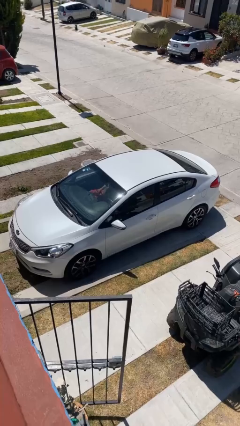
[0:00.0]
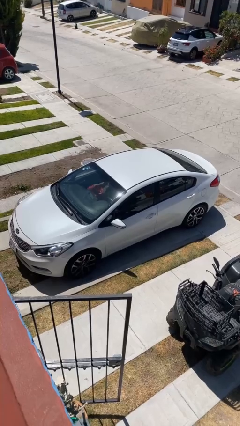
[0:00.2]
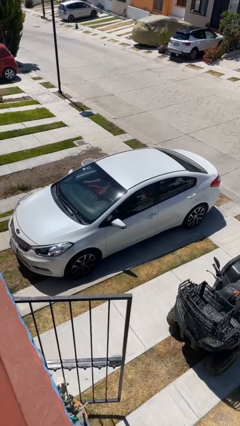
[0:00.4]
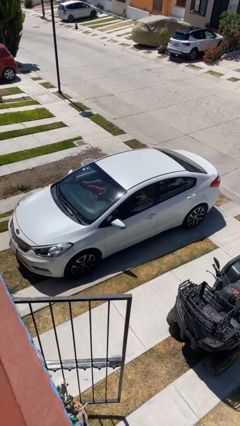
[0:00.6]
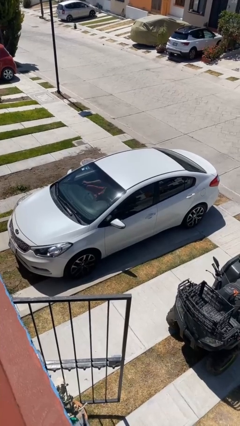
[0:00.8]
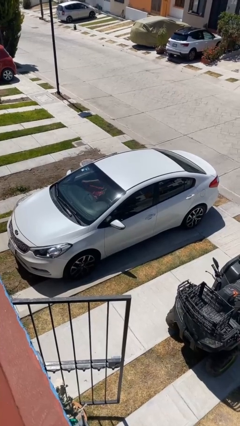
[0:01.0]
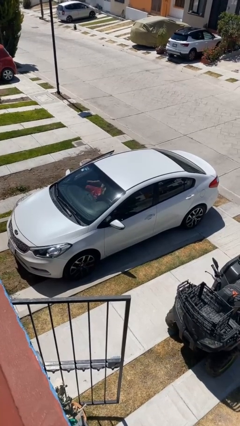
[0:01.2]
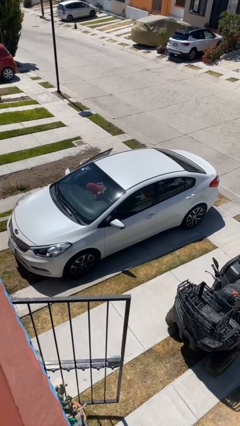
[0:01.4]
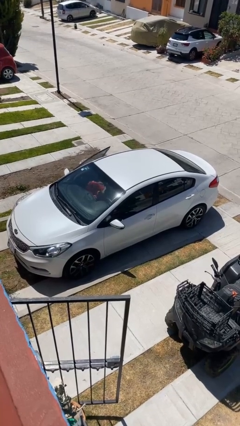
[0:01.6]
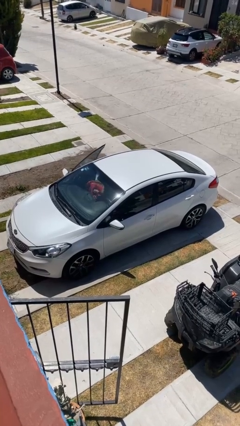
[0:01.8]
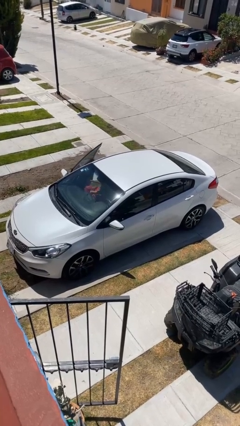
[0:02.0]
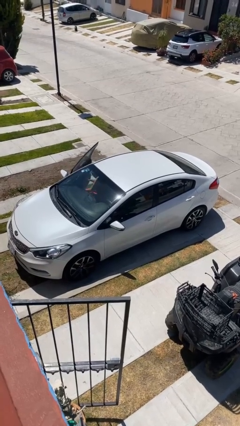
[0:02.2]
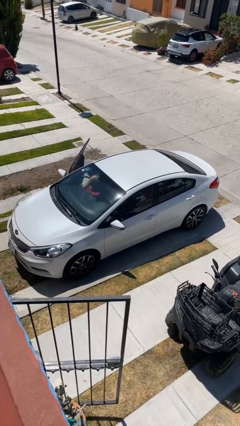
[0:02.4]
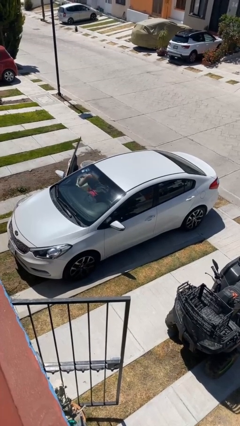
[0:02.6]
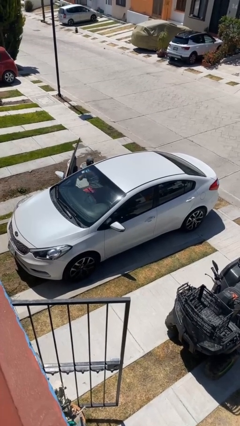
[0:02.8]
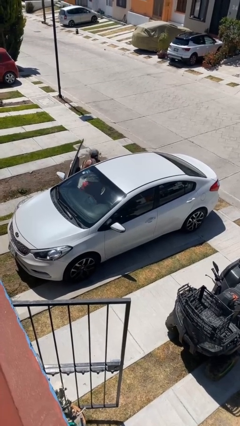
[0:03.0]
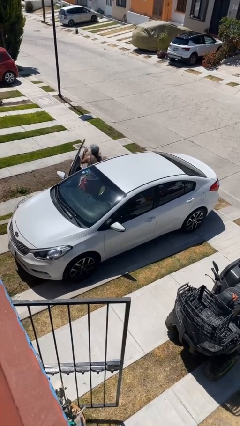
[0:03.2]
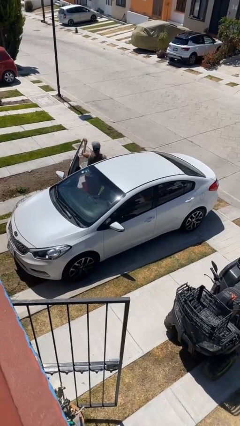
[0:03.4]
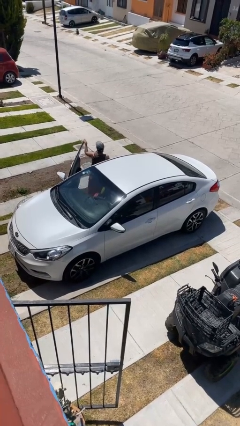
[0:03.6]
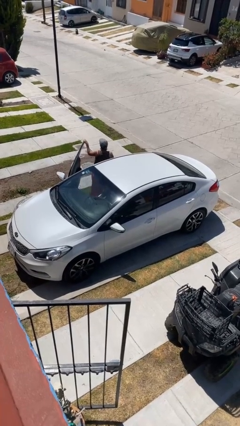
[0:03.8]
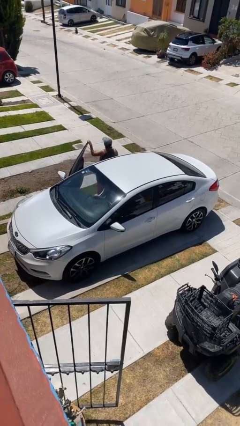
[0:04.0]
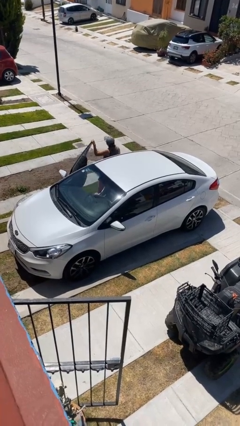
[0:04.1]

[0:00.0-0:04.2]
car drops off person

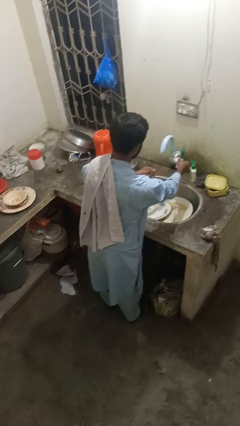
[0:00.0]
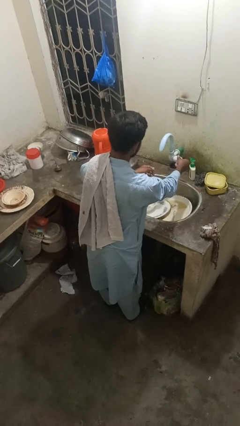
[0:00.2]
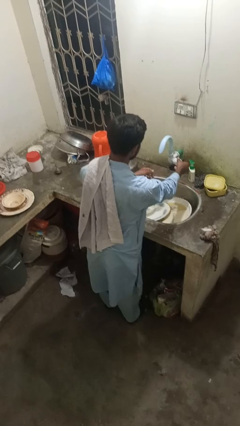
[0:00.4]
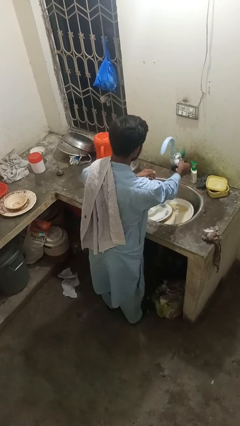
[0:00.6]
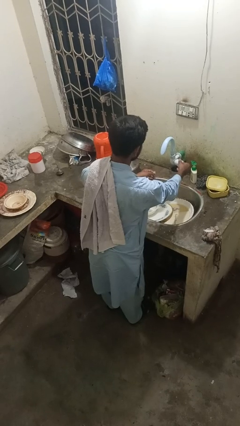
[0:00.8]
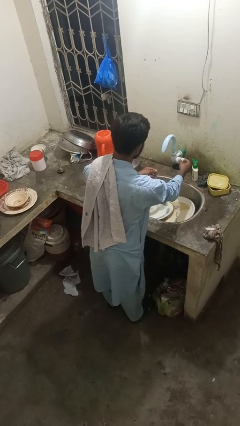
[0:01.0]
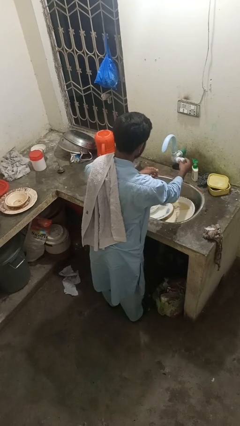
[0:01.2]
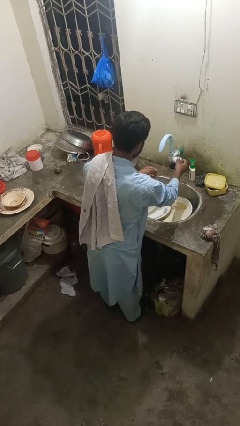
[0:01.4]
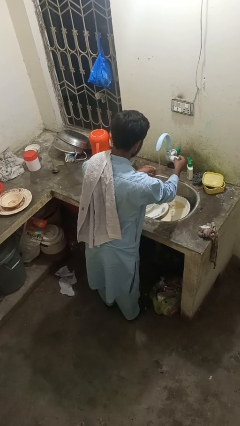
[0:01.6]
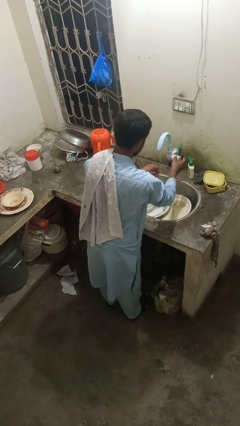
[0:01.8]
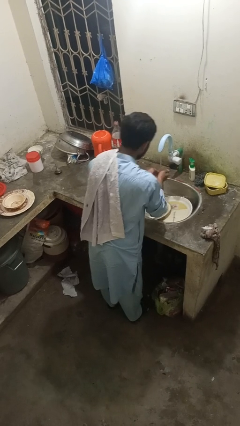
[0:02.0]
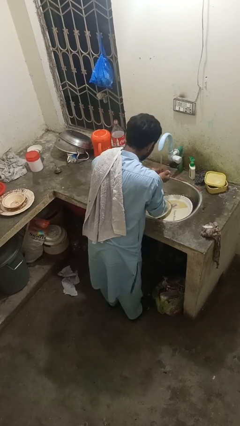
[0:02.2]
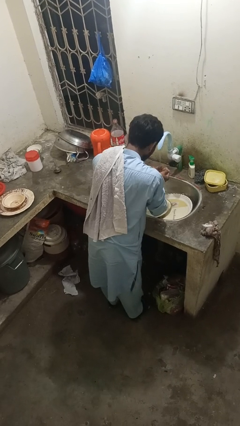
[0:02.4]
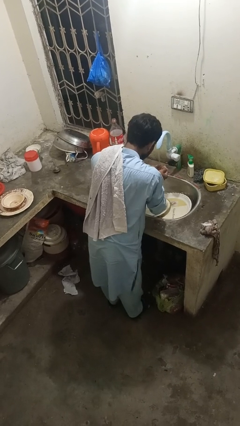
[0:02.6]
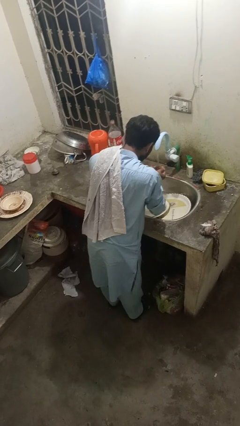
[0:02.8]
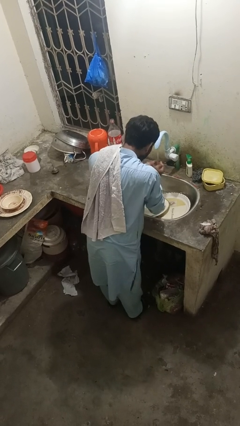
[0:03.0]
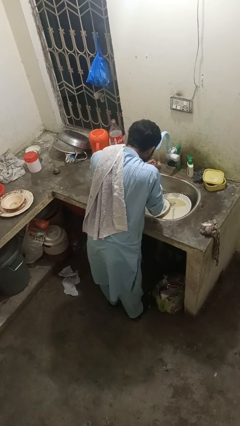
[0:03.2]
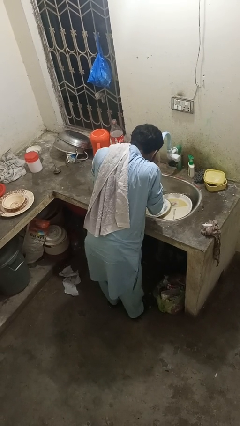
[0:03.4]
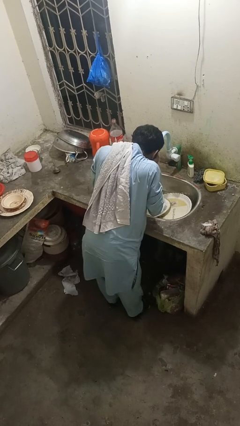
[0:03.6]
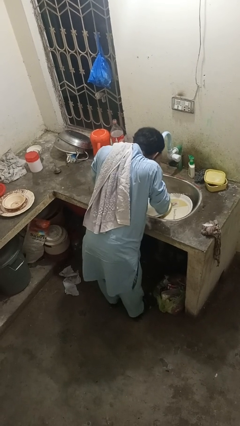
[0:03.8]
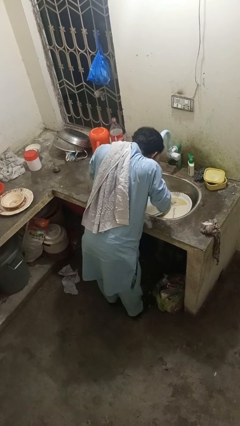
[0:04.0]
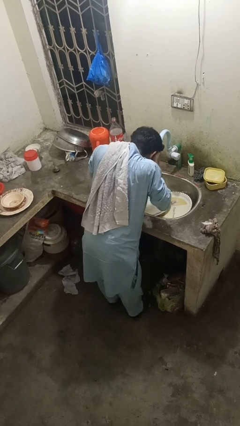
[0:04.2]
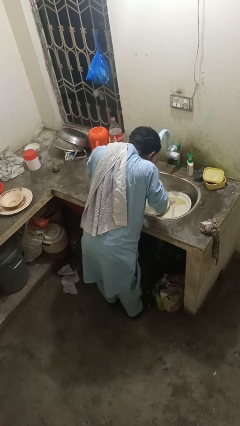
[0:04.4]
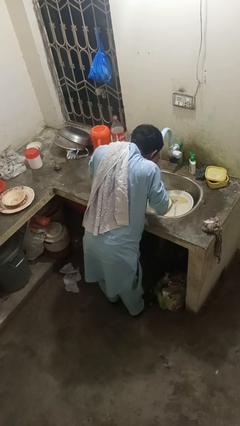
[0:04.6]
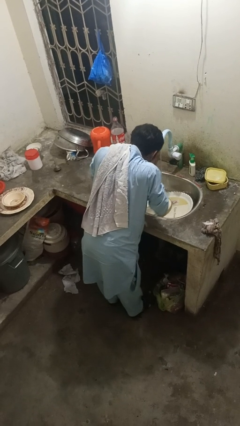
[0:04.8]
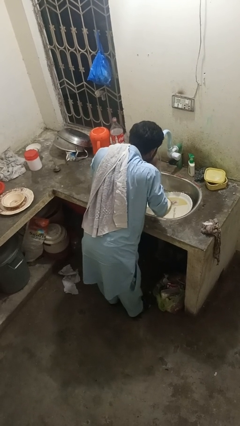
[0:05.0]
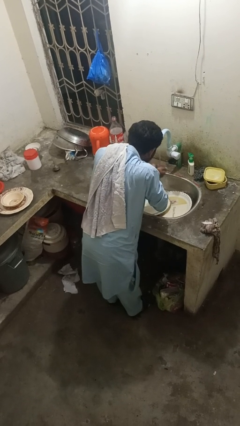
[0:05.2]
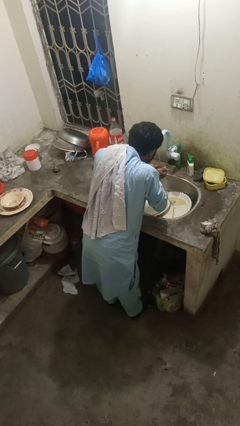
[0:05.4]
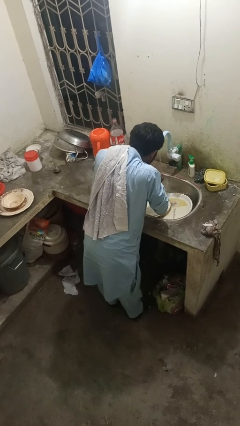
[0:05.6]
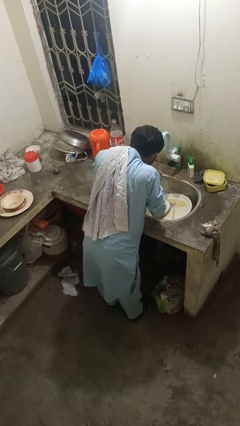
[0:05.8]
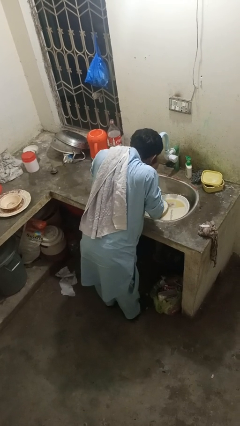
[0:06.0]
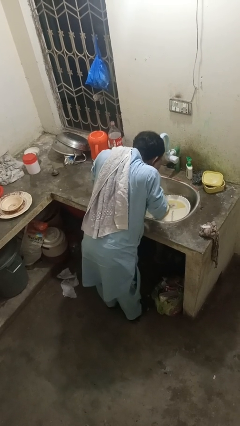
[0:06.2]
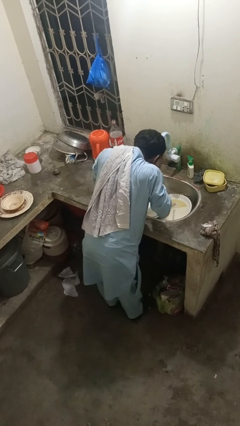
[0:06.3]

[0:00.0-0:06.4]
person washes face

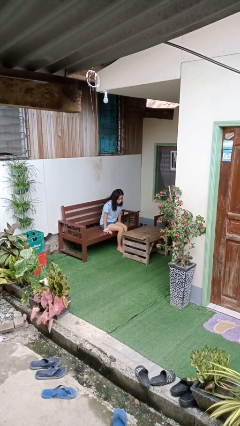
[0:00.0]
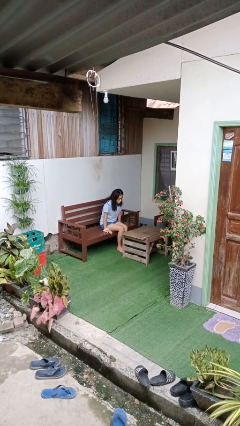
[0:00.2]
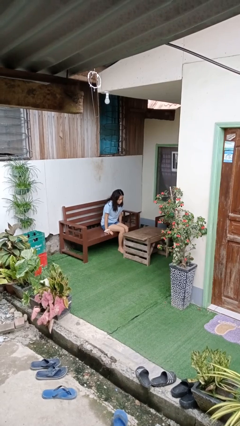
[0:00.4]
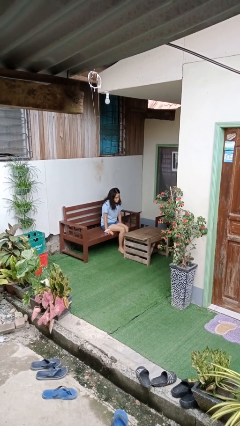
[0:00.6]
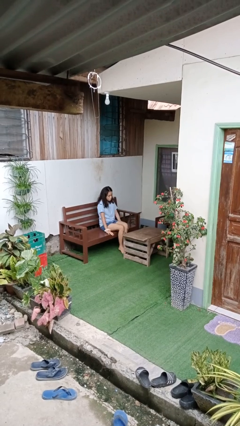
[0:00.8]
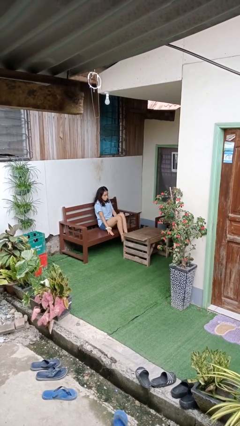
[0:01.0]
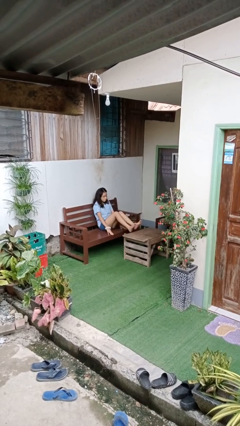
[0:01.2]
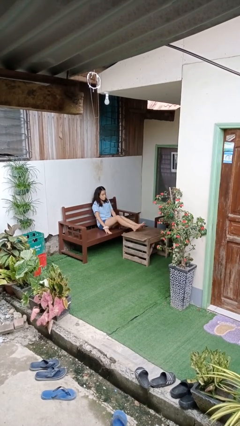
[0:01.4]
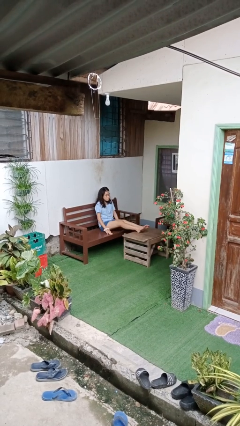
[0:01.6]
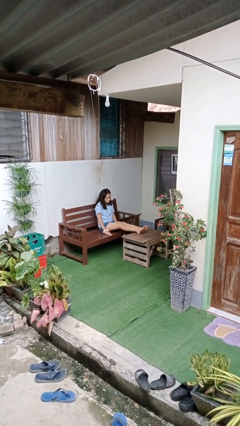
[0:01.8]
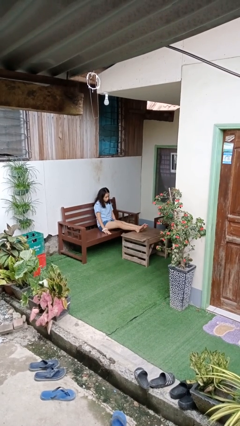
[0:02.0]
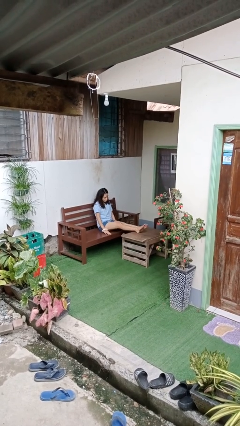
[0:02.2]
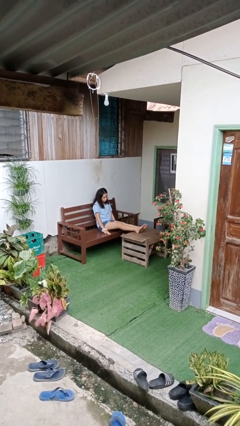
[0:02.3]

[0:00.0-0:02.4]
person puts feet up

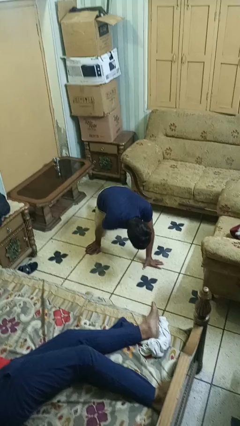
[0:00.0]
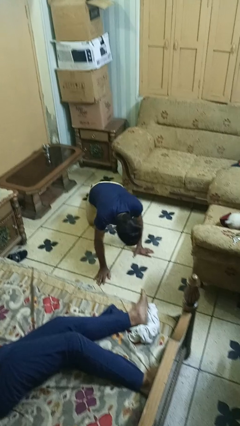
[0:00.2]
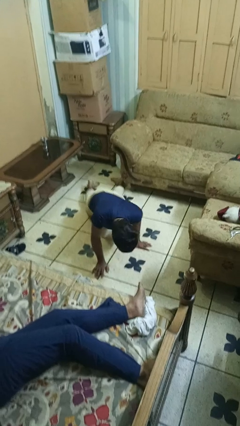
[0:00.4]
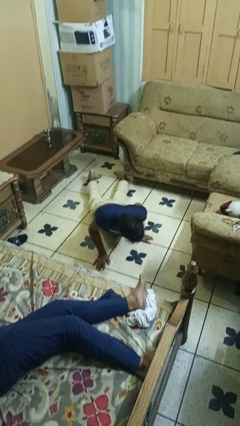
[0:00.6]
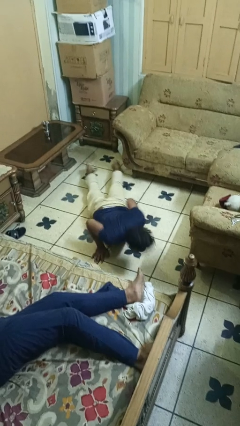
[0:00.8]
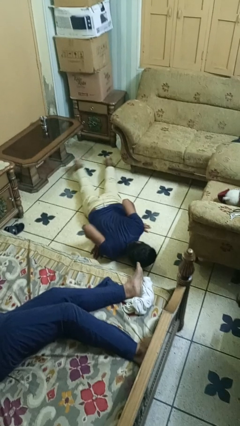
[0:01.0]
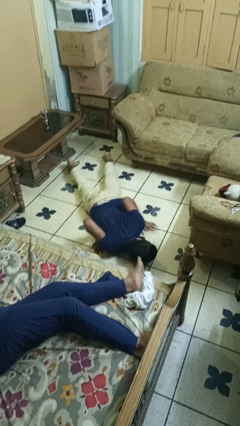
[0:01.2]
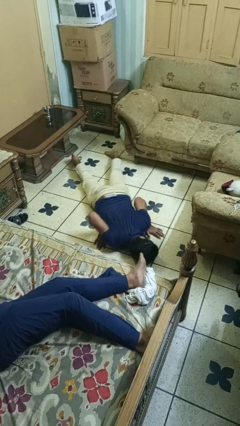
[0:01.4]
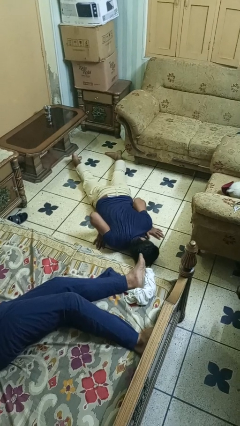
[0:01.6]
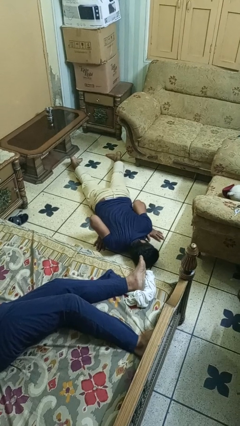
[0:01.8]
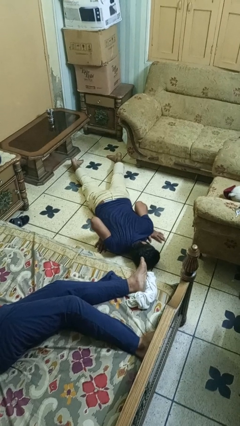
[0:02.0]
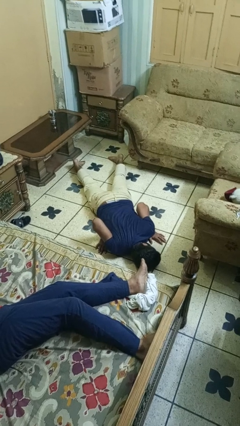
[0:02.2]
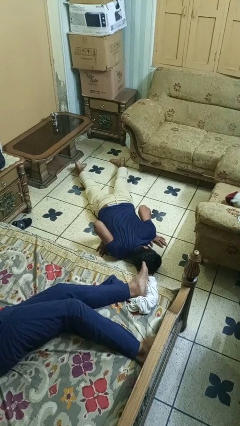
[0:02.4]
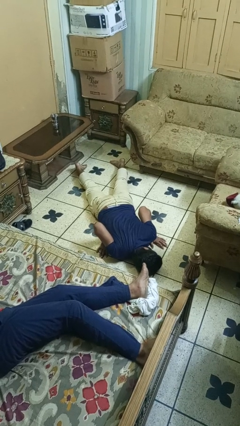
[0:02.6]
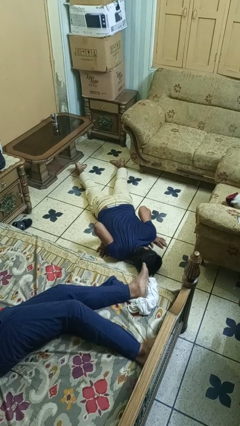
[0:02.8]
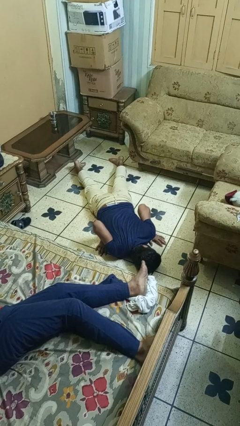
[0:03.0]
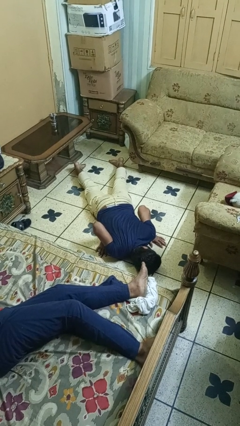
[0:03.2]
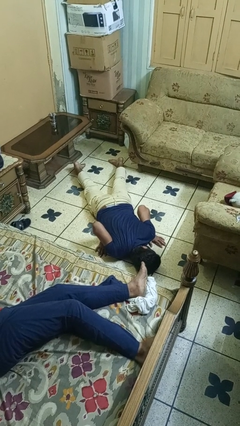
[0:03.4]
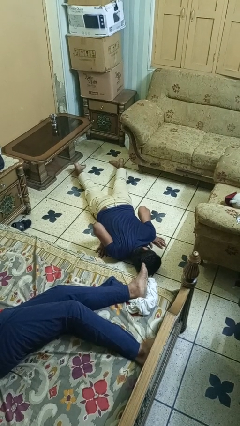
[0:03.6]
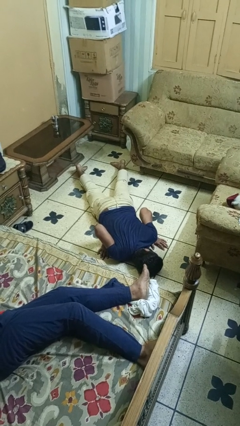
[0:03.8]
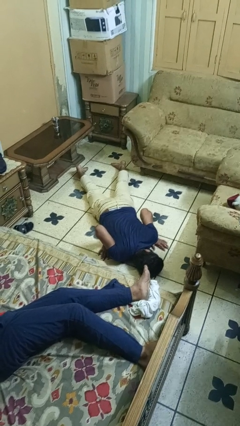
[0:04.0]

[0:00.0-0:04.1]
person lies down on floor

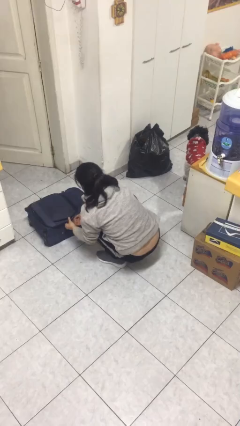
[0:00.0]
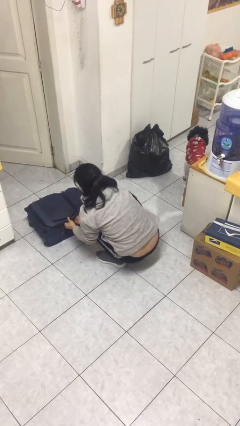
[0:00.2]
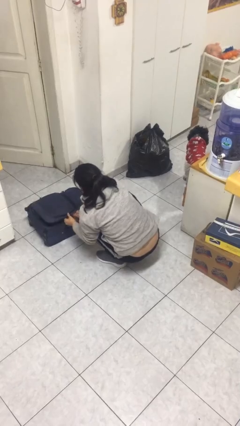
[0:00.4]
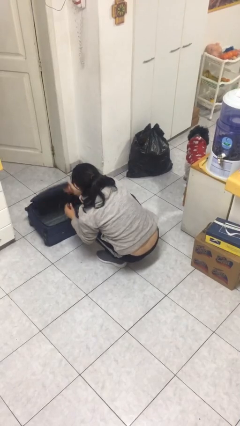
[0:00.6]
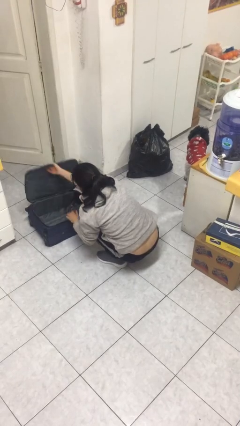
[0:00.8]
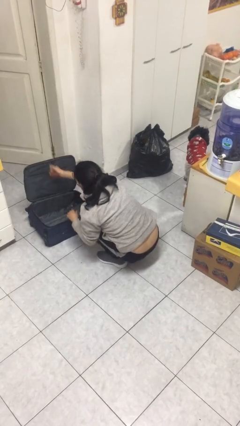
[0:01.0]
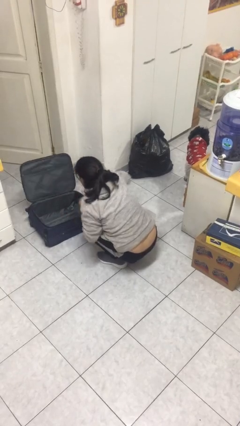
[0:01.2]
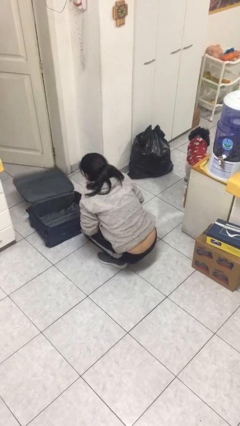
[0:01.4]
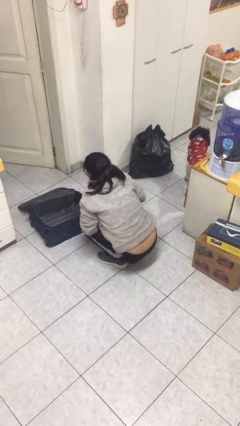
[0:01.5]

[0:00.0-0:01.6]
person opens suitcase
